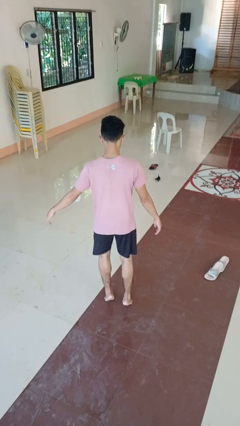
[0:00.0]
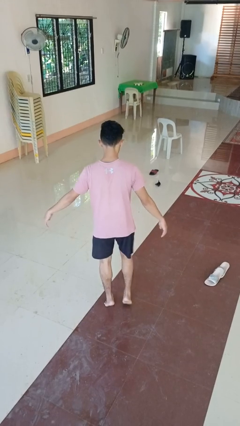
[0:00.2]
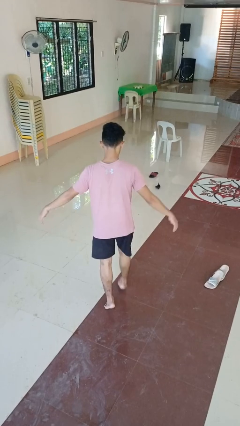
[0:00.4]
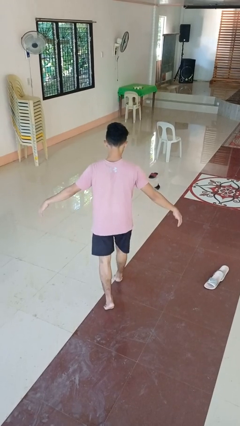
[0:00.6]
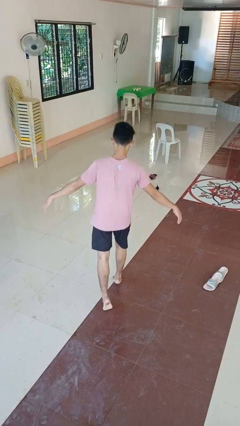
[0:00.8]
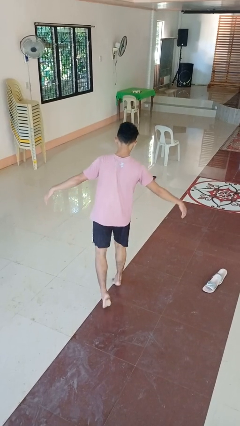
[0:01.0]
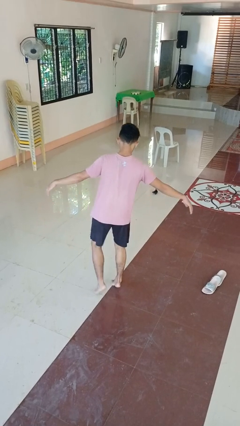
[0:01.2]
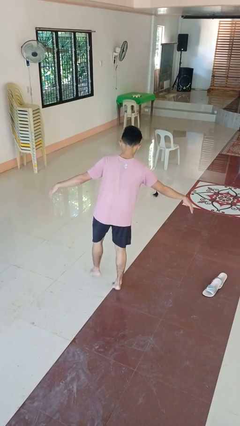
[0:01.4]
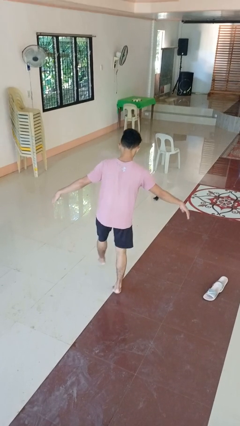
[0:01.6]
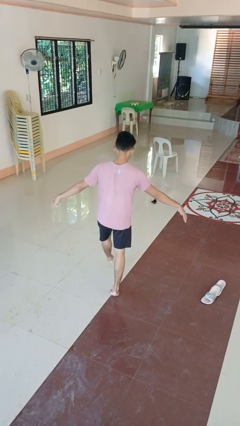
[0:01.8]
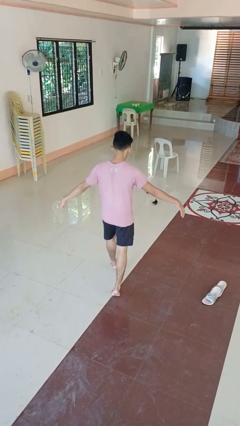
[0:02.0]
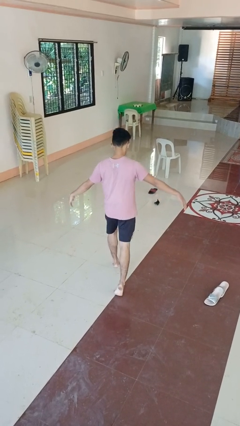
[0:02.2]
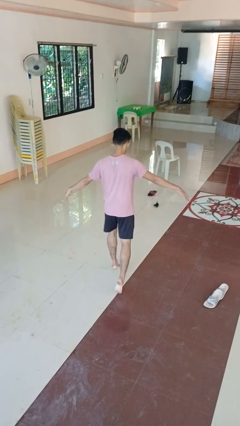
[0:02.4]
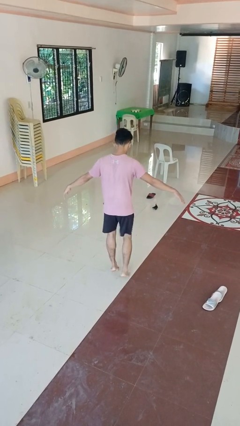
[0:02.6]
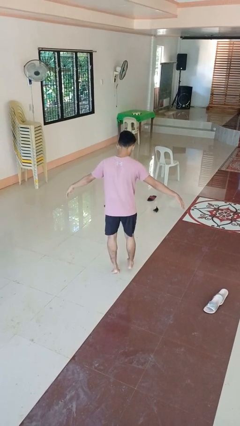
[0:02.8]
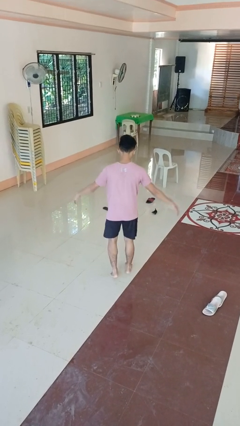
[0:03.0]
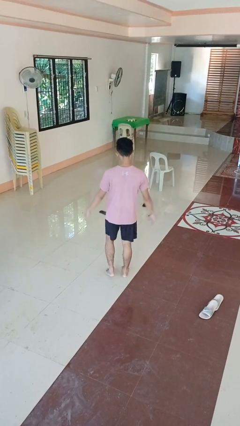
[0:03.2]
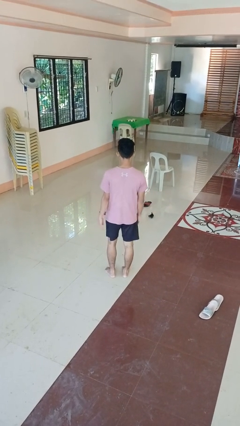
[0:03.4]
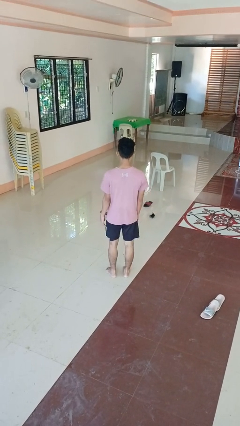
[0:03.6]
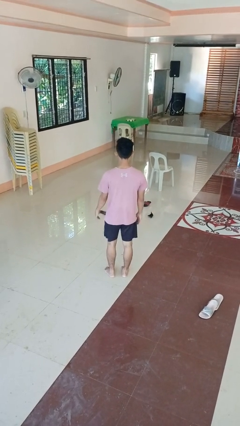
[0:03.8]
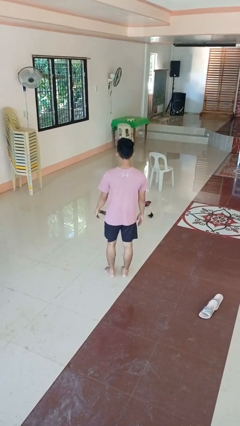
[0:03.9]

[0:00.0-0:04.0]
person walks tiptoe

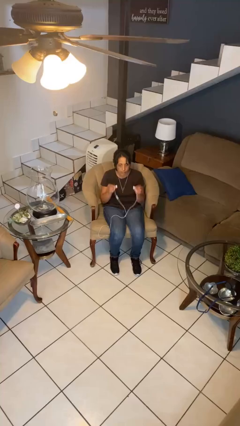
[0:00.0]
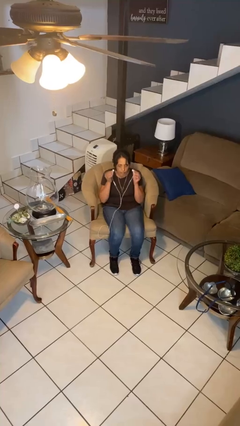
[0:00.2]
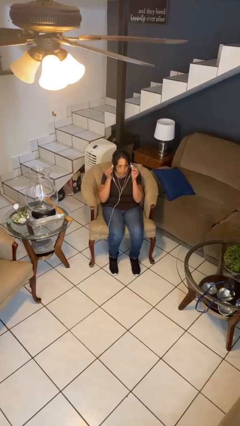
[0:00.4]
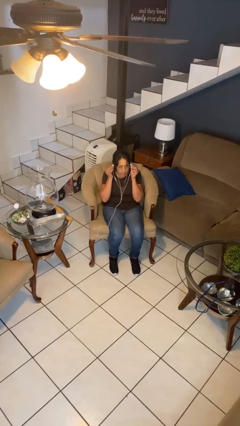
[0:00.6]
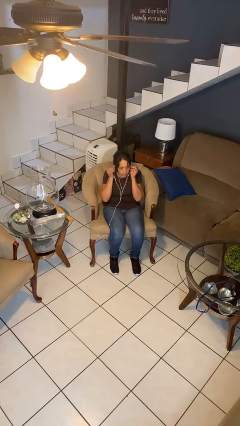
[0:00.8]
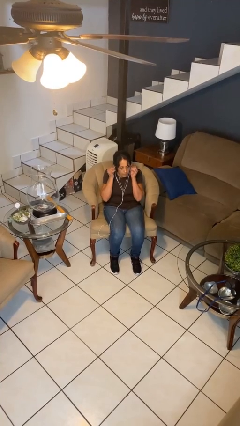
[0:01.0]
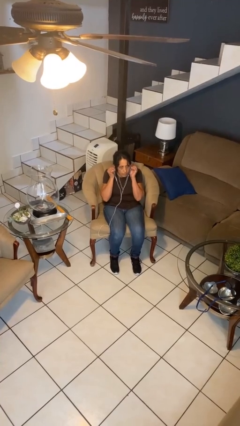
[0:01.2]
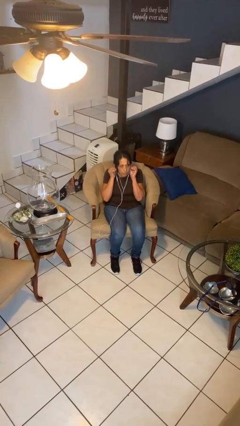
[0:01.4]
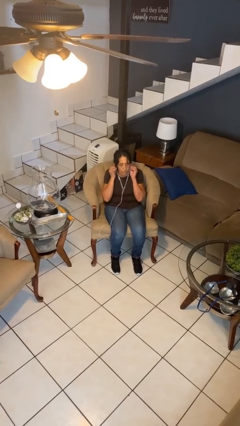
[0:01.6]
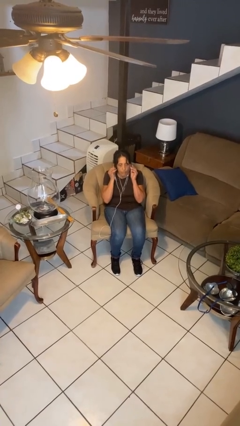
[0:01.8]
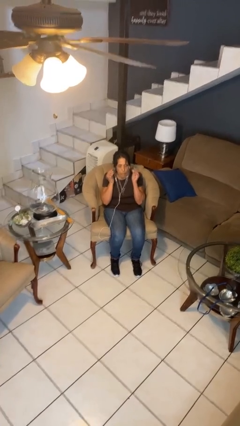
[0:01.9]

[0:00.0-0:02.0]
person puts on headphones

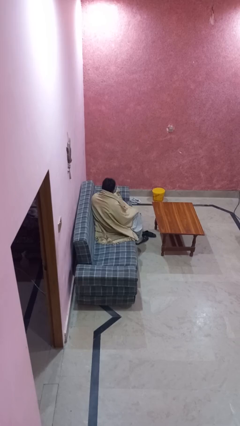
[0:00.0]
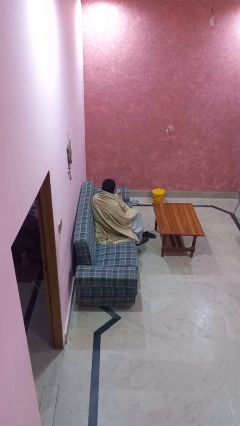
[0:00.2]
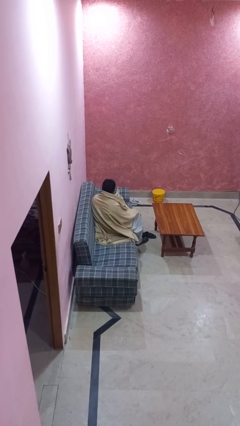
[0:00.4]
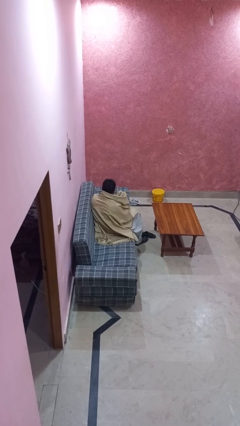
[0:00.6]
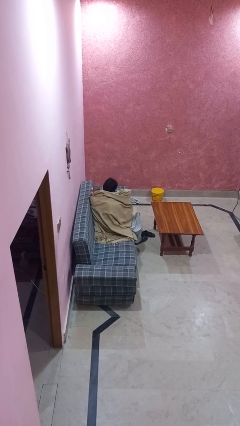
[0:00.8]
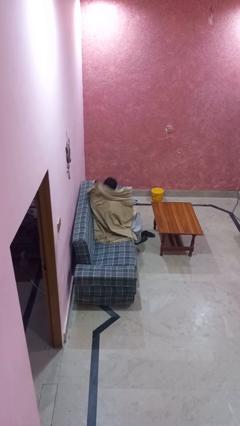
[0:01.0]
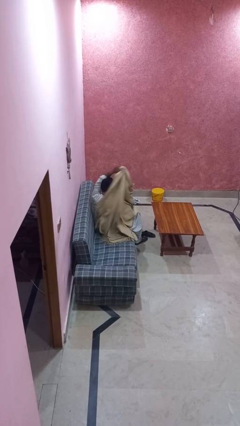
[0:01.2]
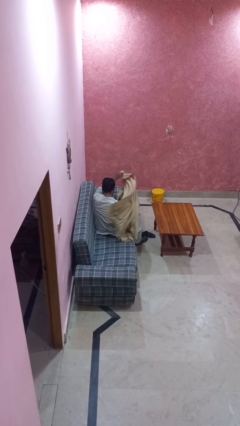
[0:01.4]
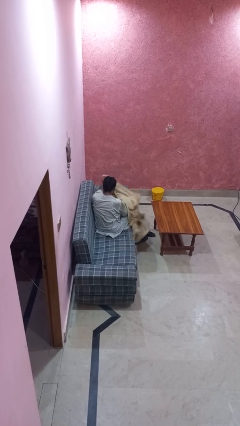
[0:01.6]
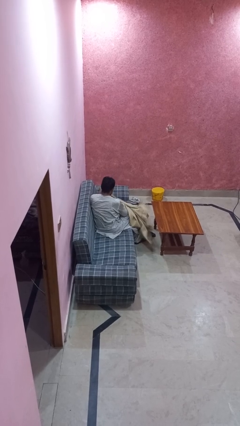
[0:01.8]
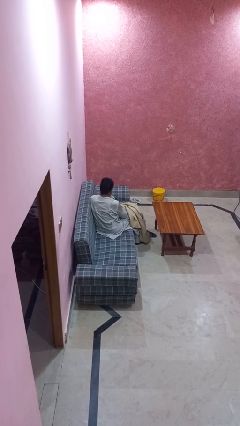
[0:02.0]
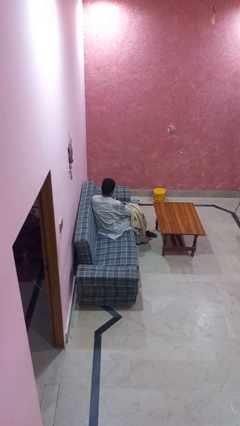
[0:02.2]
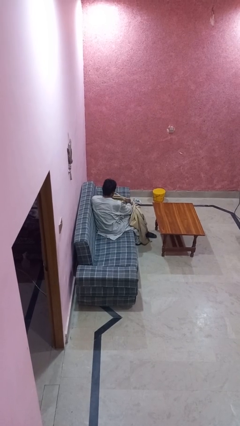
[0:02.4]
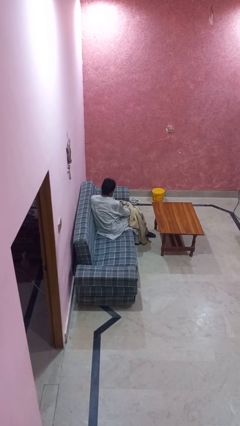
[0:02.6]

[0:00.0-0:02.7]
person uncovers with blanket

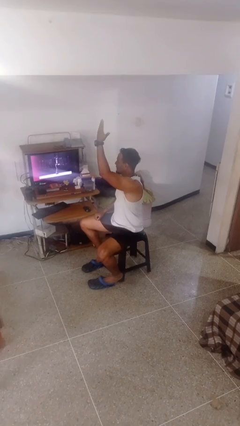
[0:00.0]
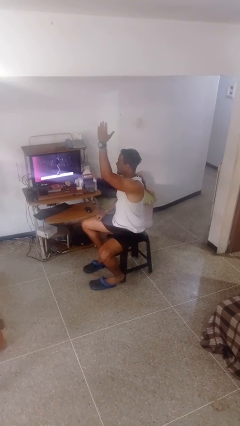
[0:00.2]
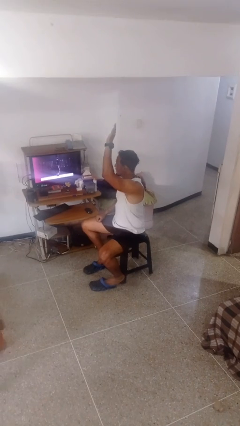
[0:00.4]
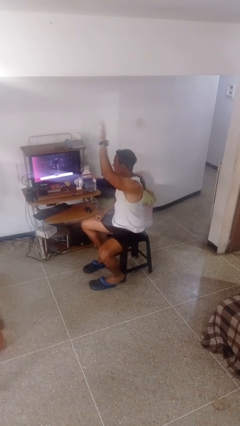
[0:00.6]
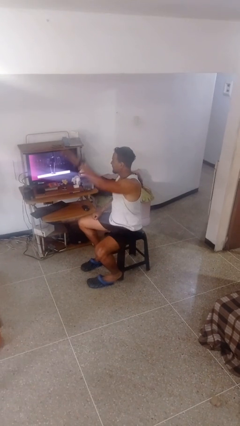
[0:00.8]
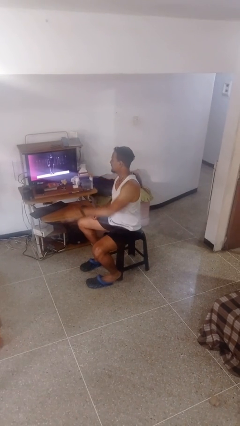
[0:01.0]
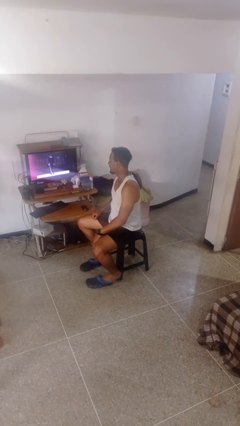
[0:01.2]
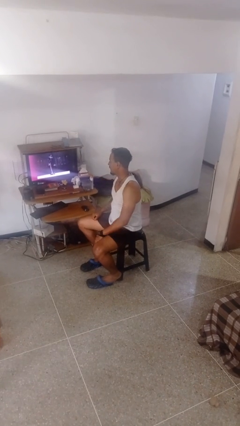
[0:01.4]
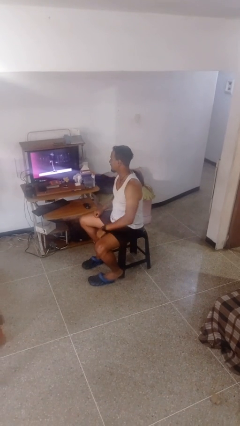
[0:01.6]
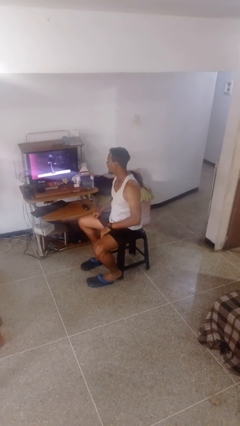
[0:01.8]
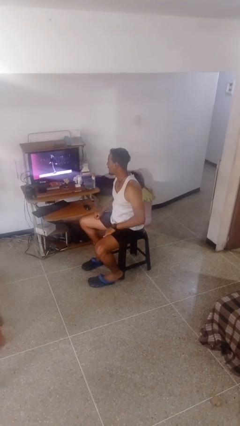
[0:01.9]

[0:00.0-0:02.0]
person gestures swipe down

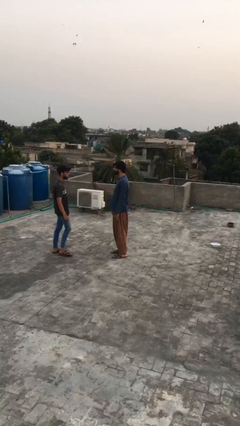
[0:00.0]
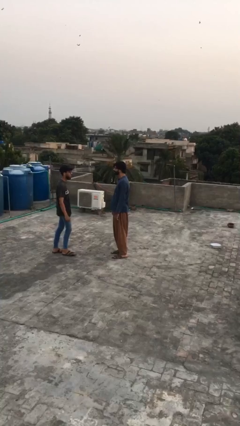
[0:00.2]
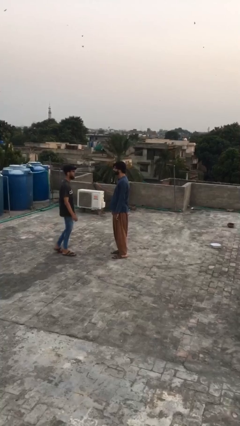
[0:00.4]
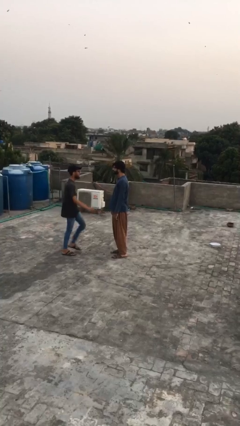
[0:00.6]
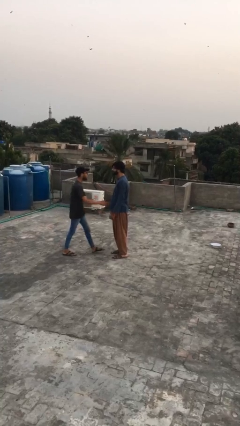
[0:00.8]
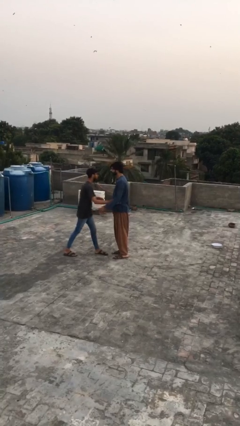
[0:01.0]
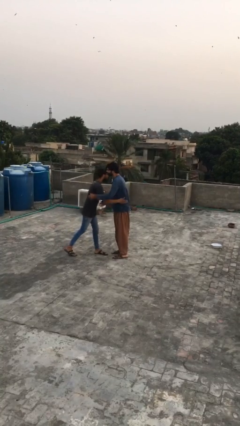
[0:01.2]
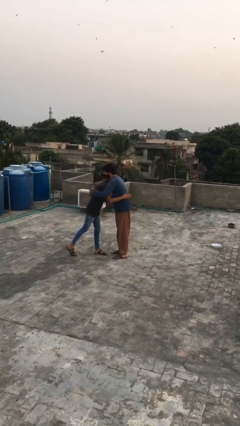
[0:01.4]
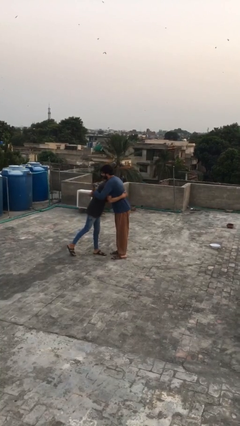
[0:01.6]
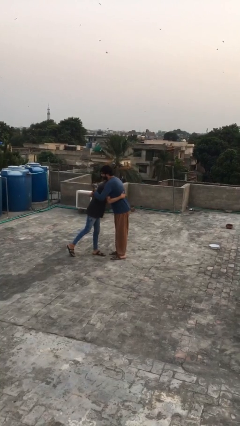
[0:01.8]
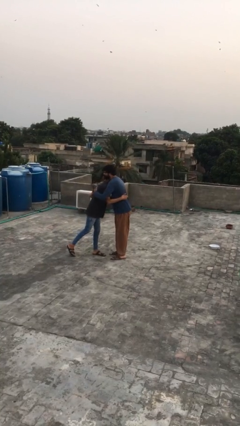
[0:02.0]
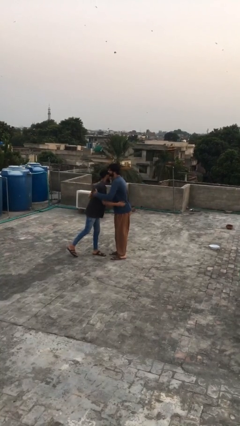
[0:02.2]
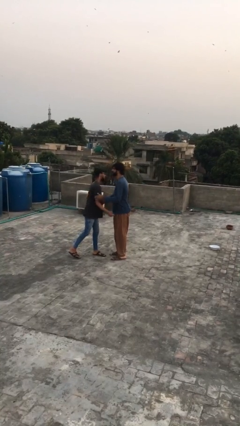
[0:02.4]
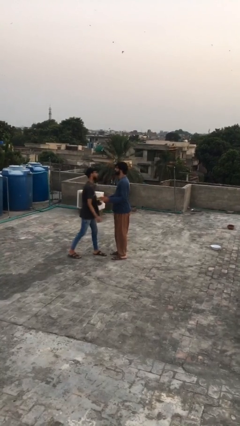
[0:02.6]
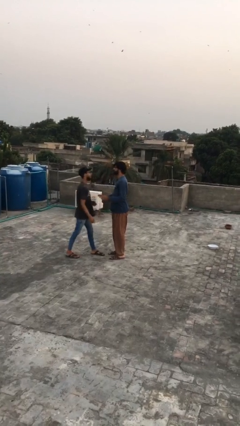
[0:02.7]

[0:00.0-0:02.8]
person embraces person

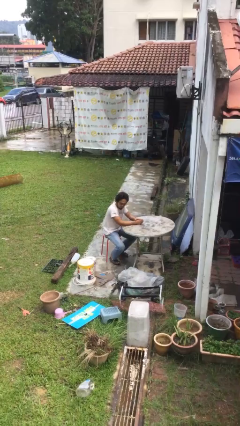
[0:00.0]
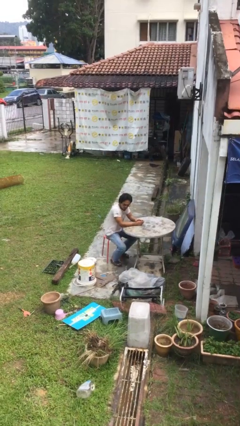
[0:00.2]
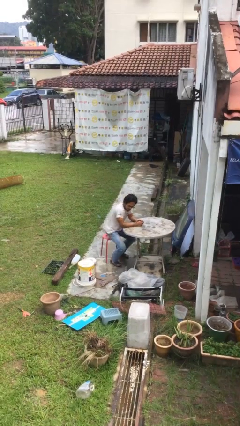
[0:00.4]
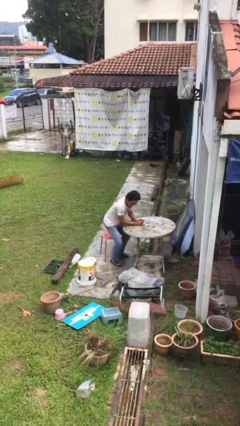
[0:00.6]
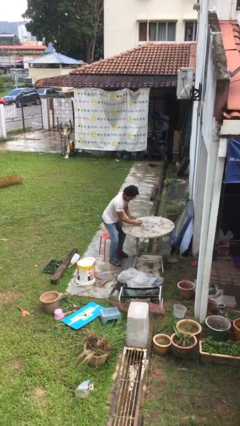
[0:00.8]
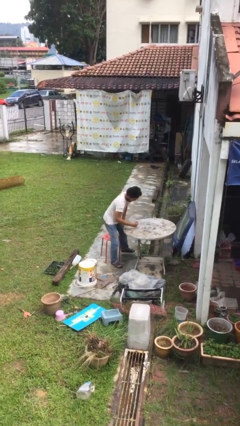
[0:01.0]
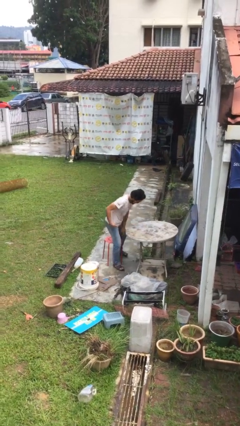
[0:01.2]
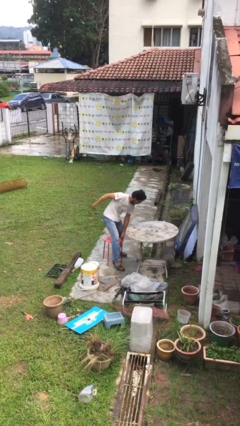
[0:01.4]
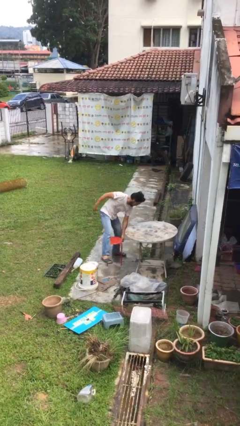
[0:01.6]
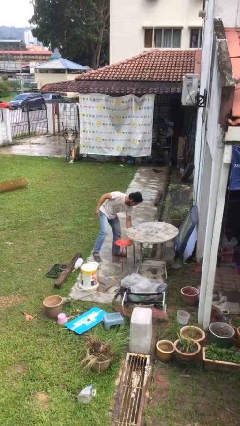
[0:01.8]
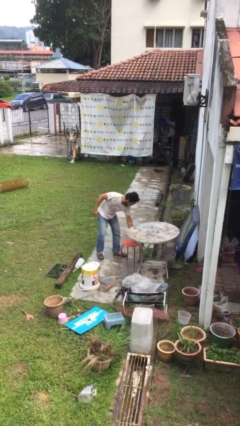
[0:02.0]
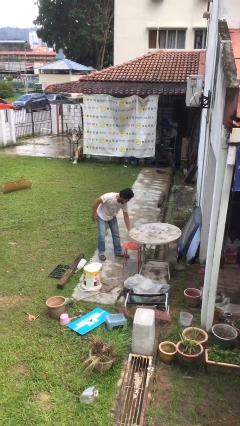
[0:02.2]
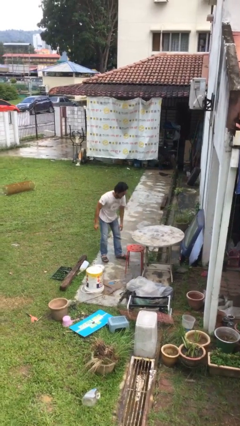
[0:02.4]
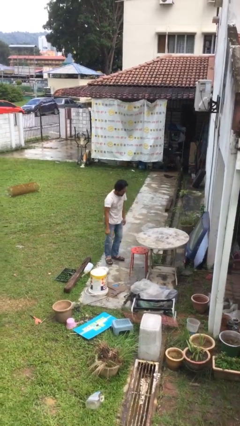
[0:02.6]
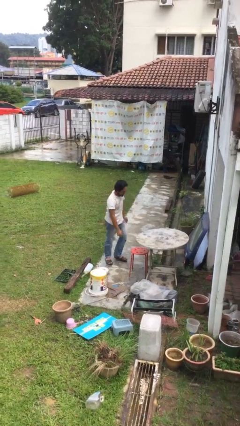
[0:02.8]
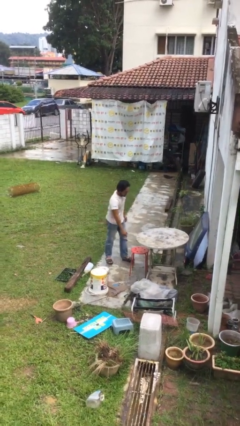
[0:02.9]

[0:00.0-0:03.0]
person stands up

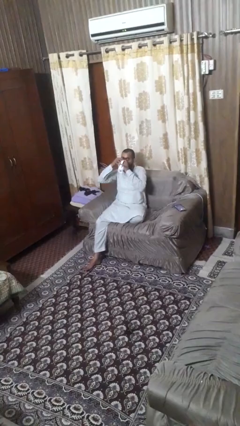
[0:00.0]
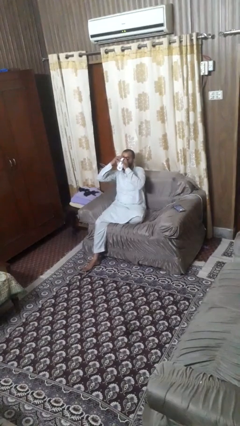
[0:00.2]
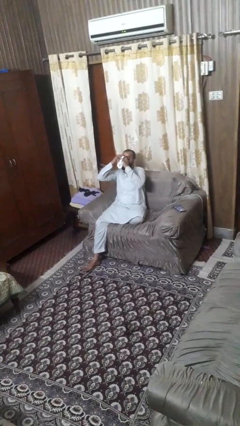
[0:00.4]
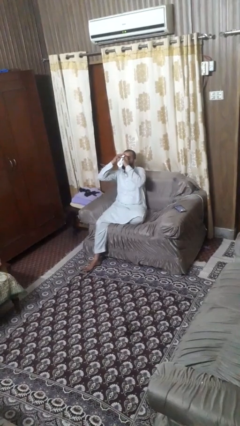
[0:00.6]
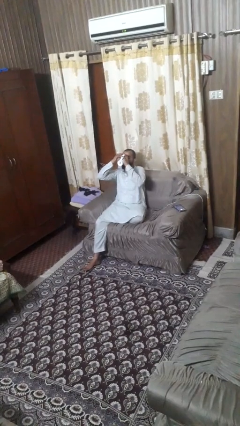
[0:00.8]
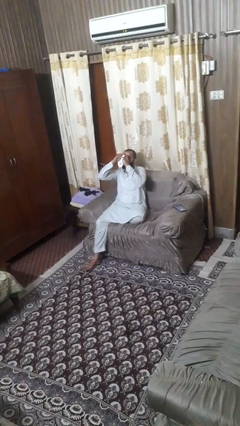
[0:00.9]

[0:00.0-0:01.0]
person drinks from mug
